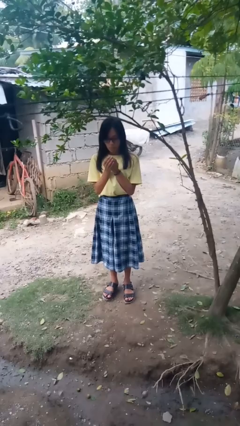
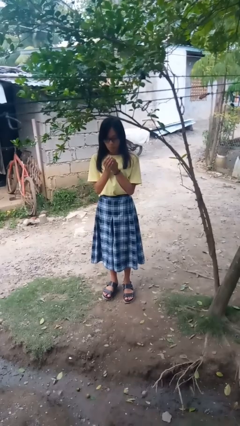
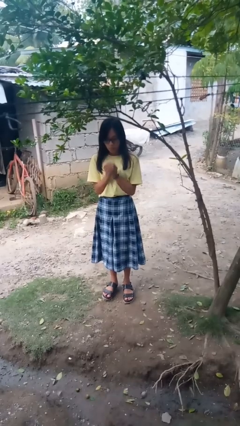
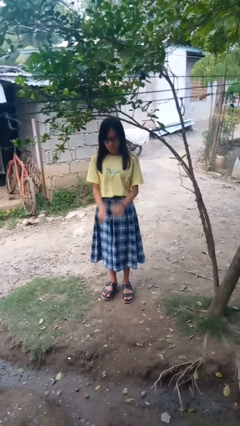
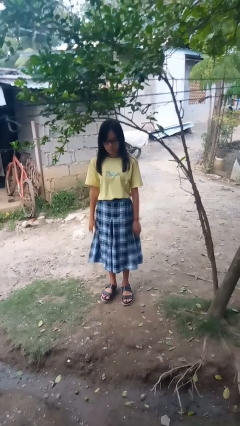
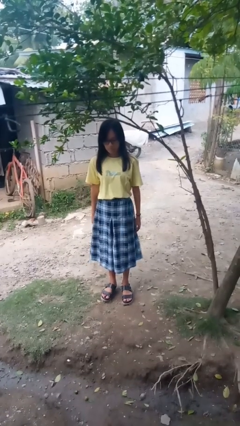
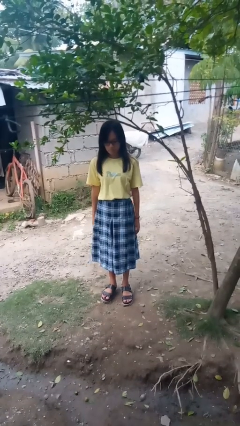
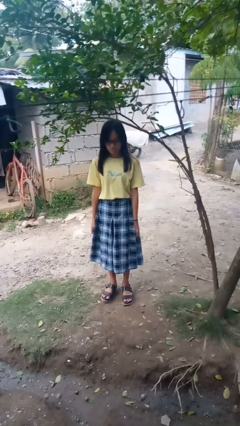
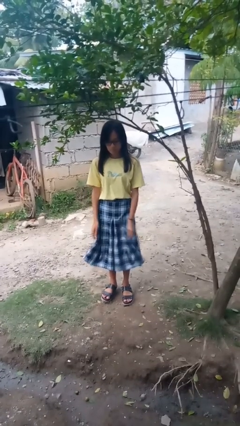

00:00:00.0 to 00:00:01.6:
person blows into hands

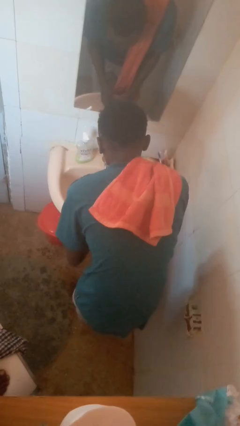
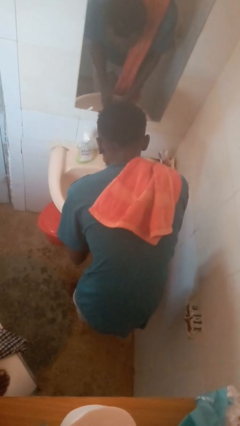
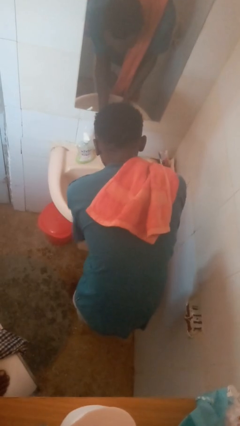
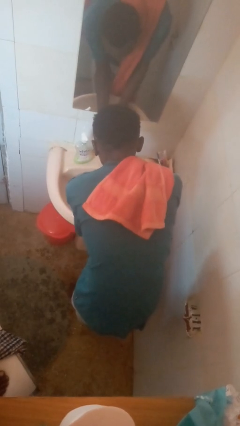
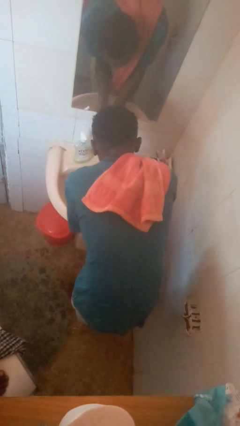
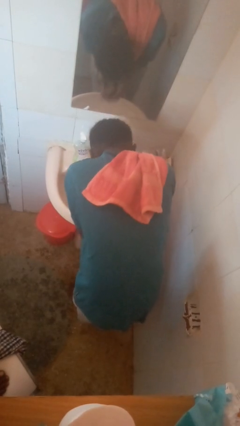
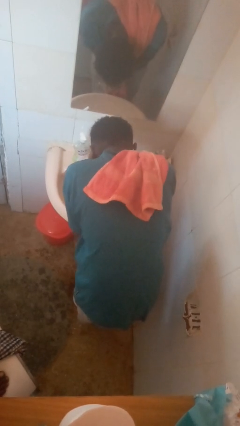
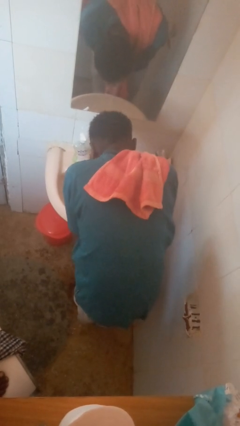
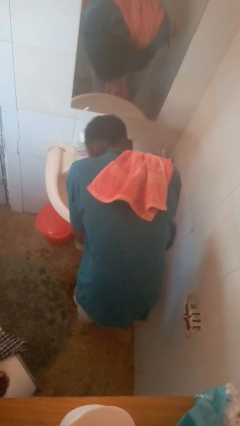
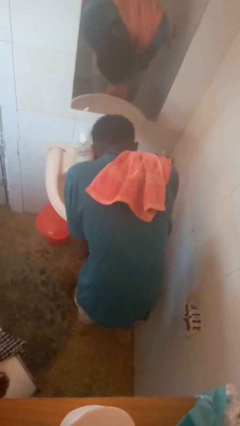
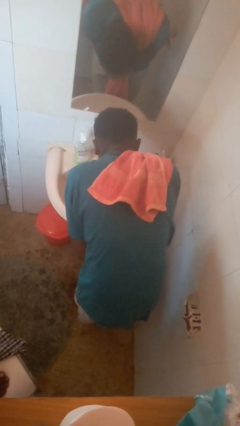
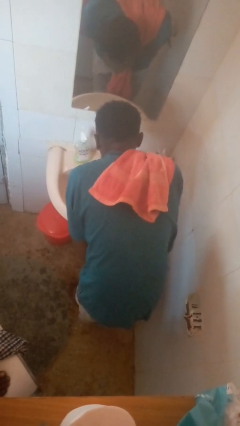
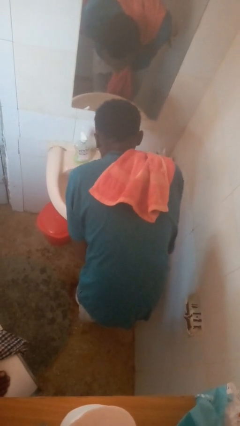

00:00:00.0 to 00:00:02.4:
person washes face

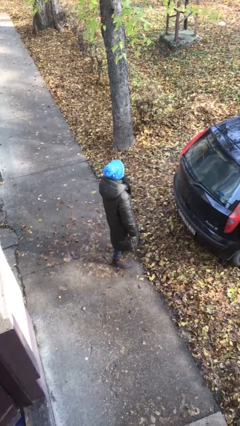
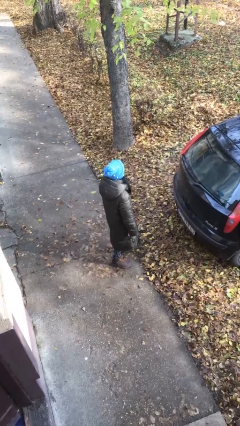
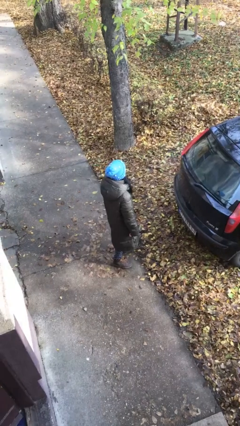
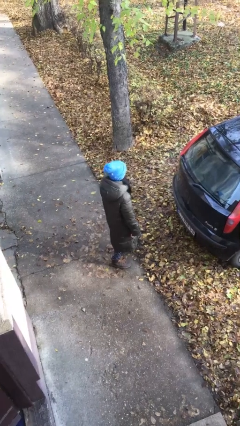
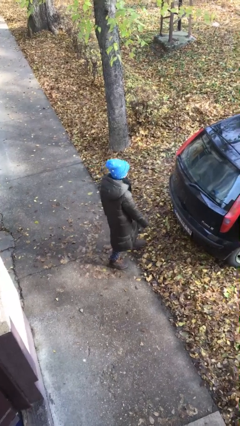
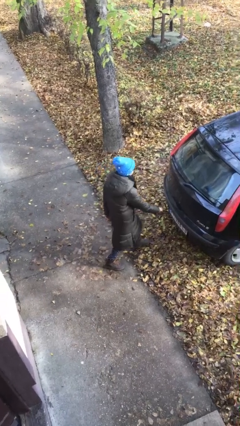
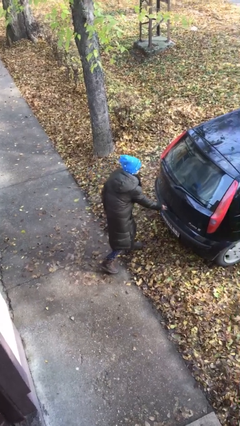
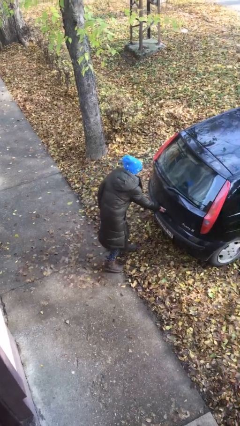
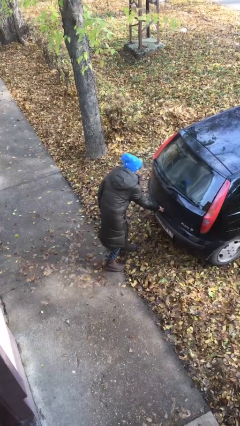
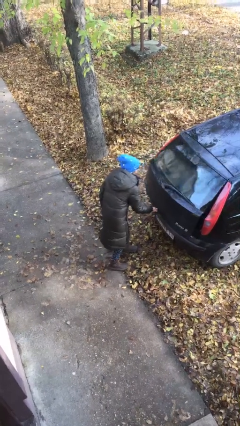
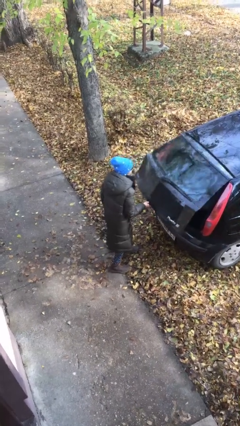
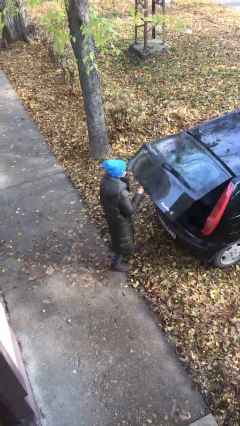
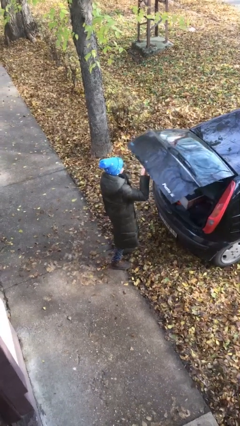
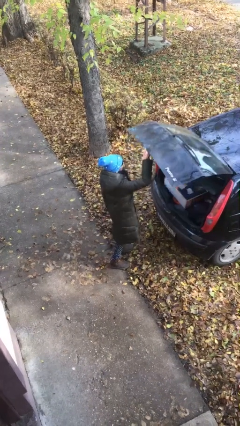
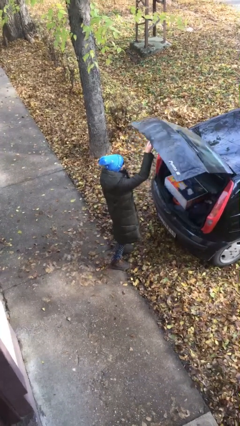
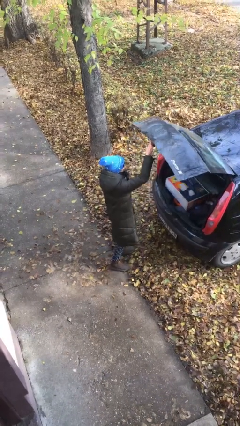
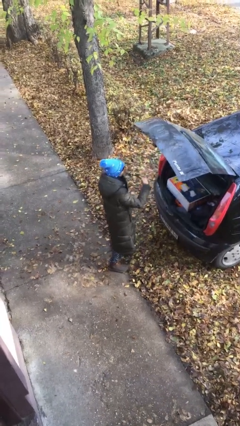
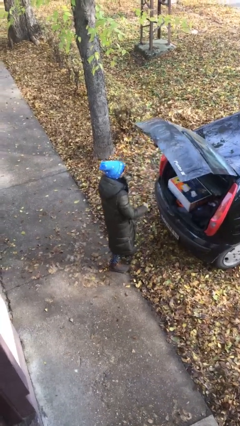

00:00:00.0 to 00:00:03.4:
person opens car trunk

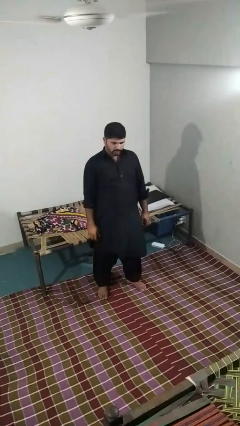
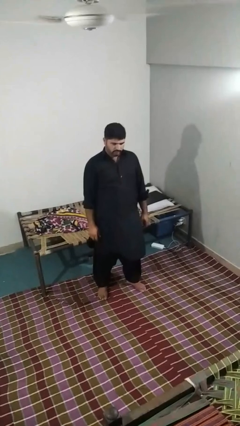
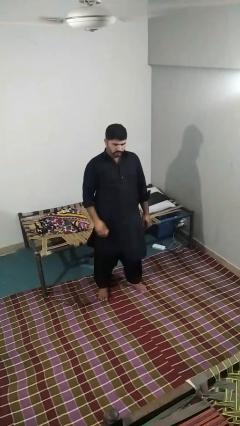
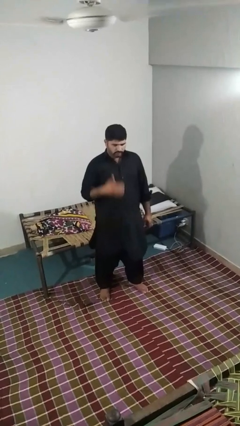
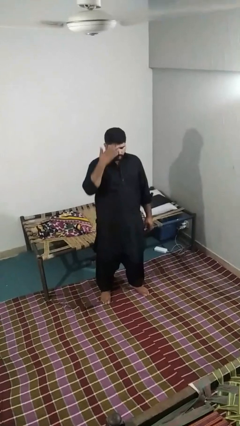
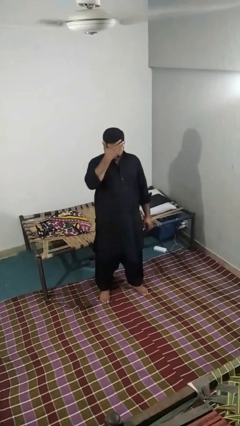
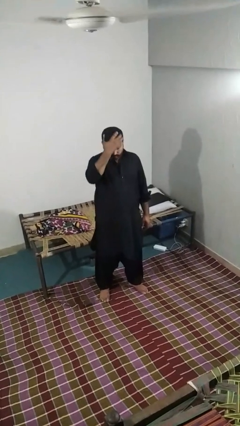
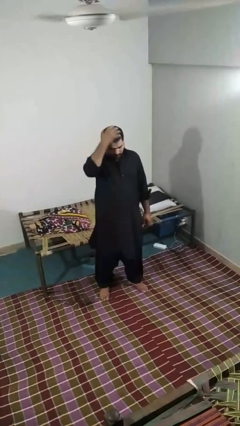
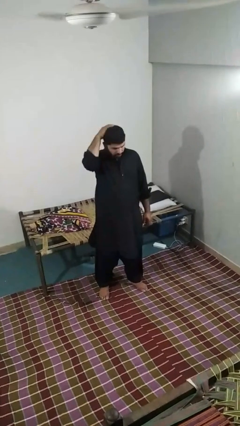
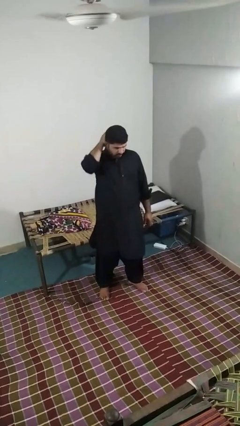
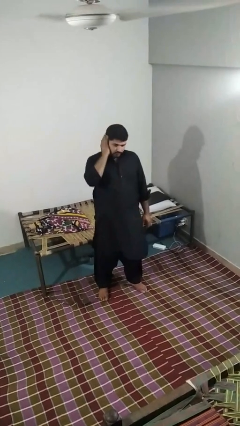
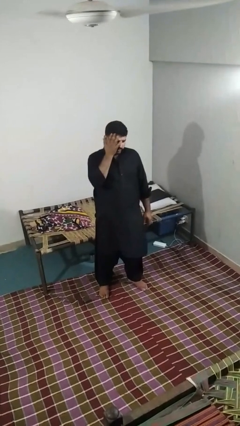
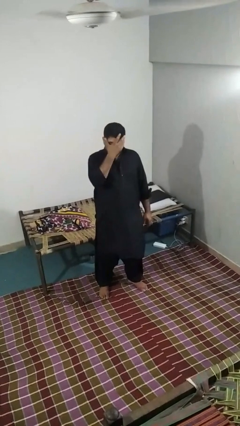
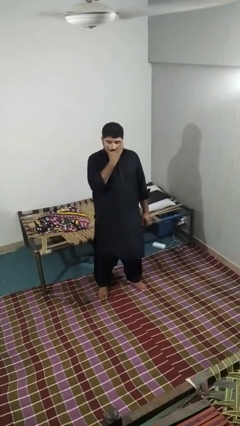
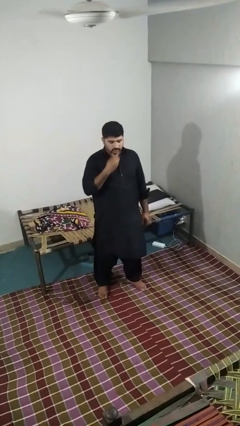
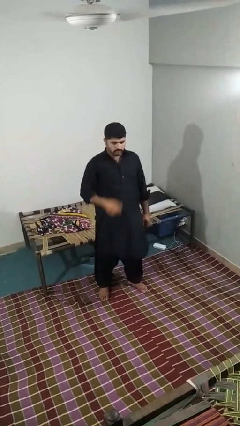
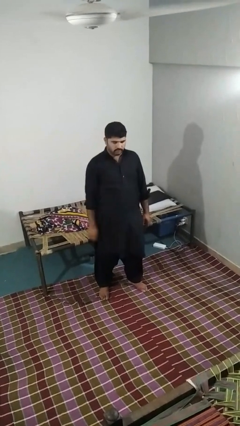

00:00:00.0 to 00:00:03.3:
person scratches face

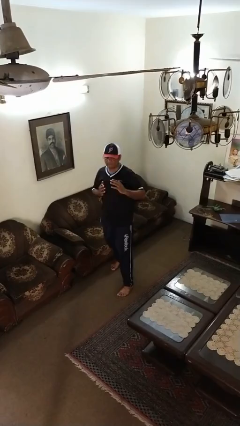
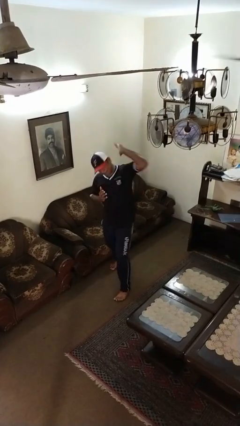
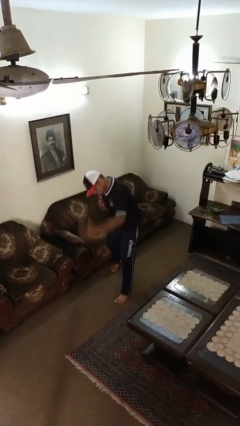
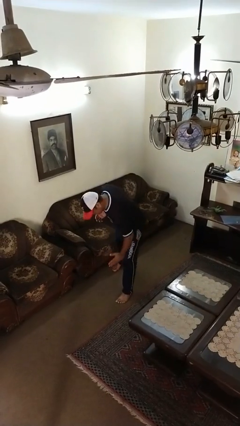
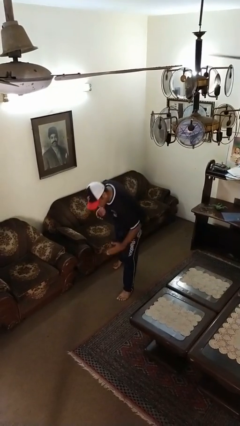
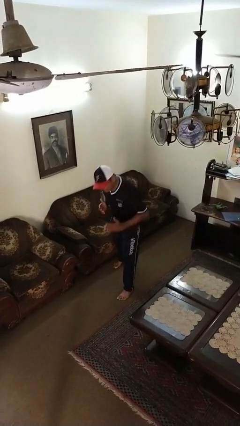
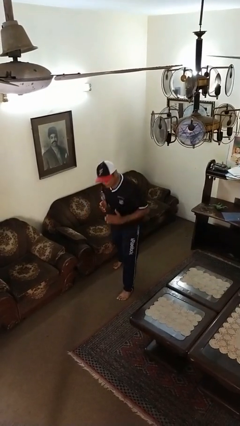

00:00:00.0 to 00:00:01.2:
person karate chop

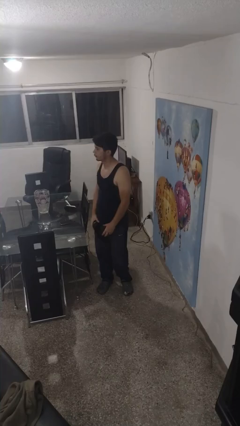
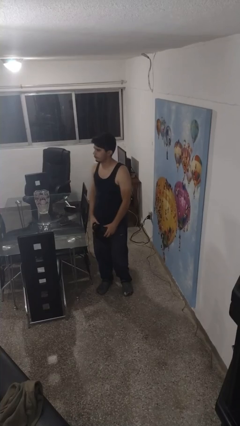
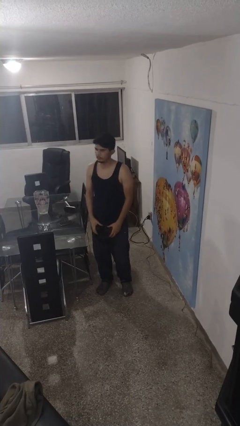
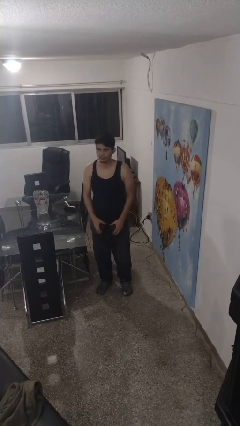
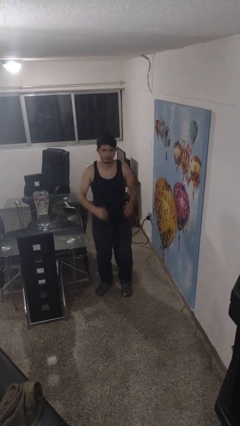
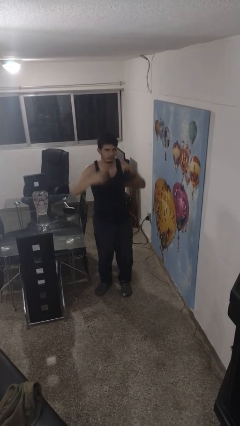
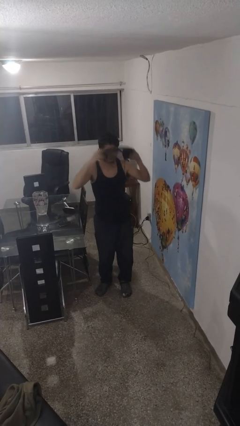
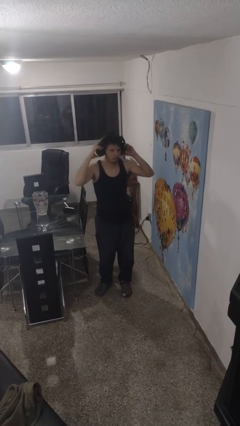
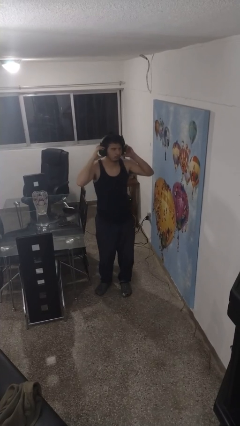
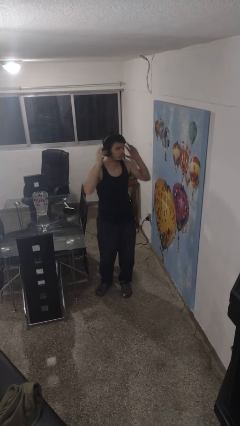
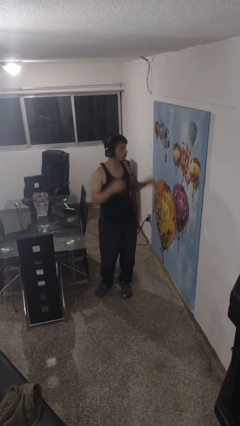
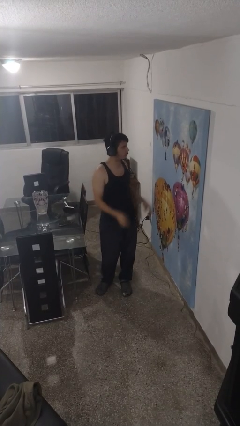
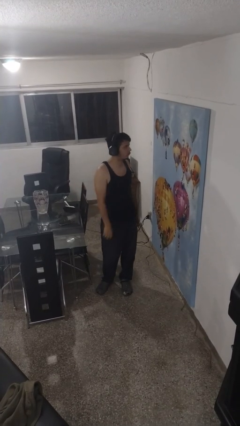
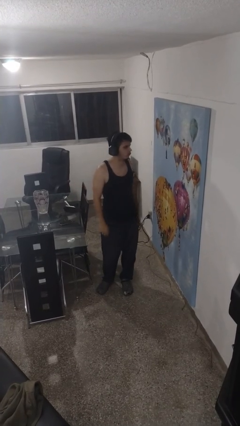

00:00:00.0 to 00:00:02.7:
person puts on headphones

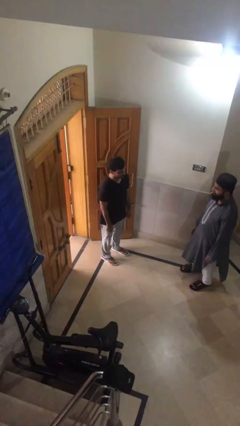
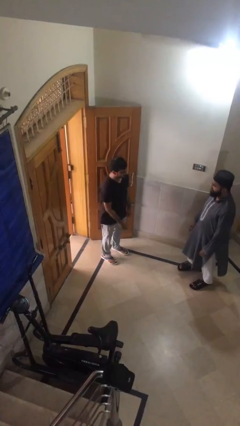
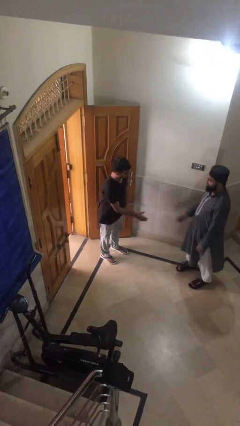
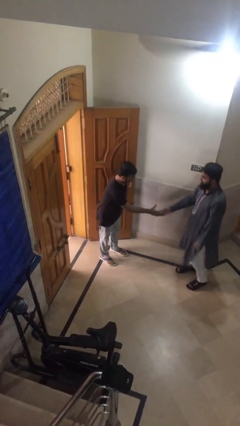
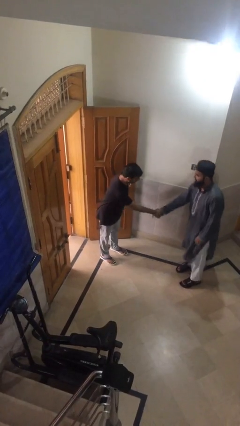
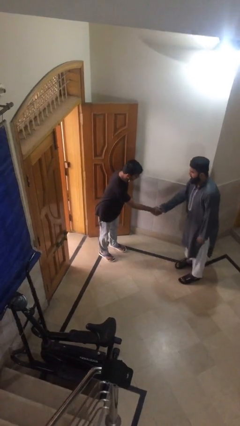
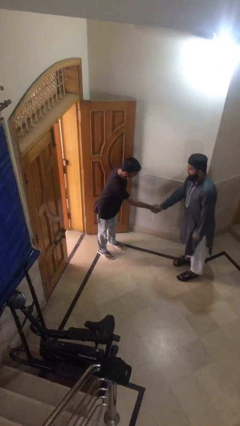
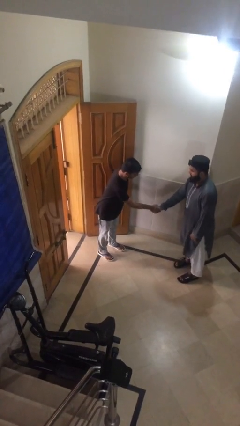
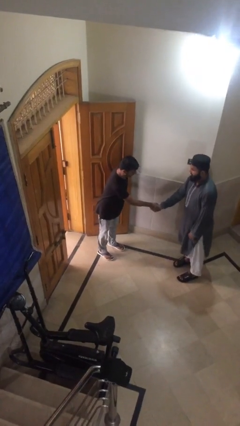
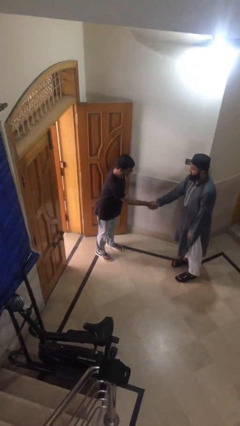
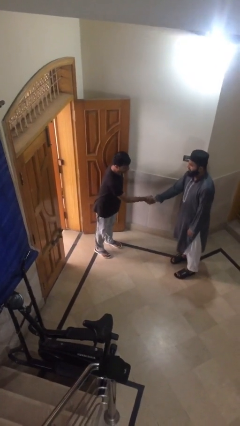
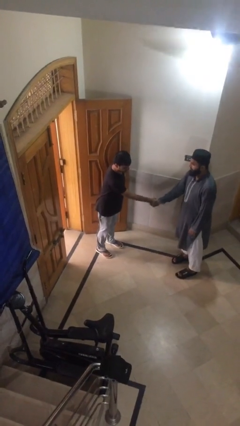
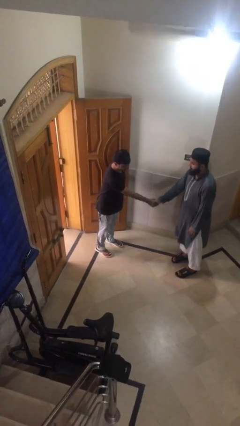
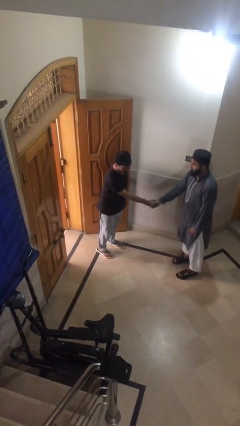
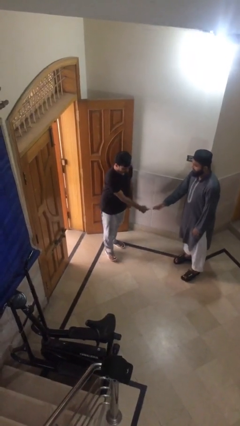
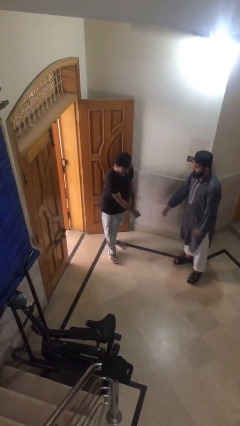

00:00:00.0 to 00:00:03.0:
person shakes hand
